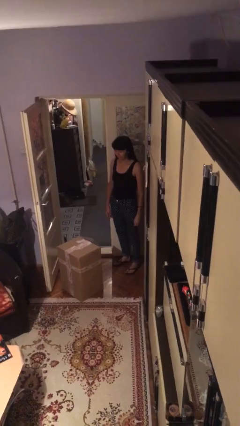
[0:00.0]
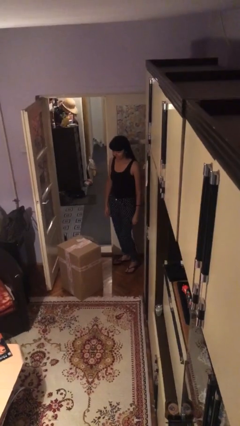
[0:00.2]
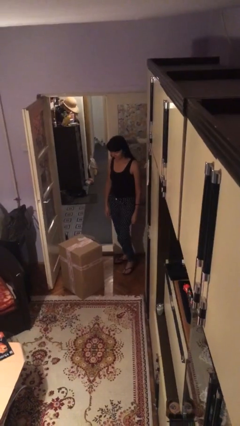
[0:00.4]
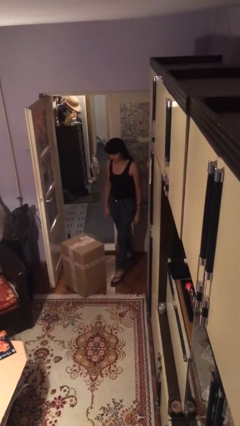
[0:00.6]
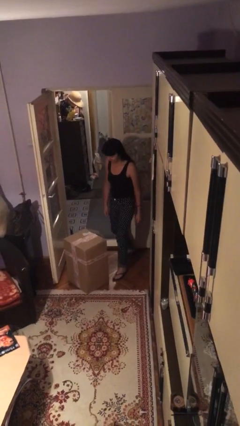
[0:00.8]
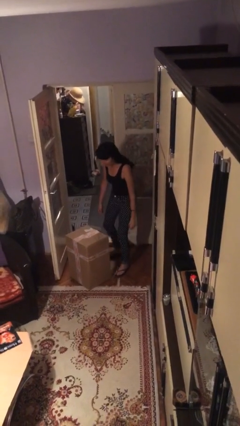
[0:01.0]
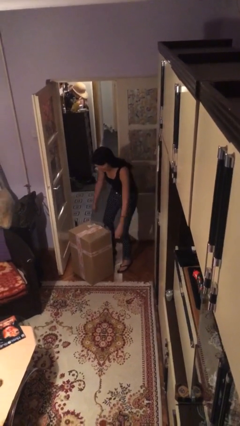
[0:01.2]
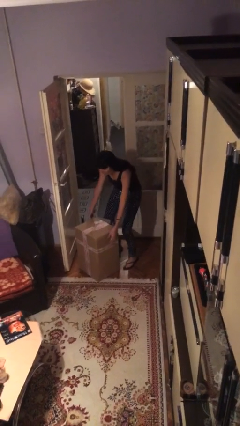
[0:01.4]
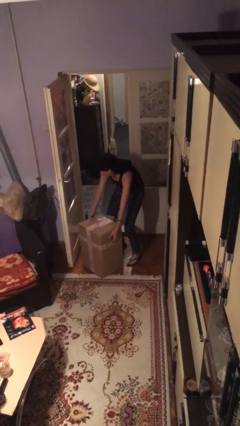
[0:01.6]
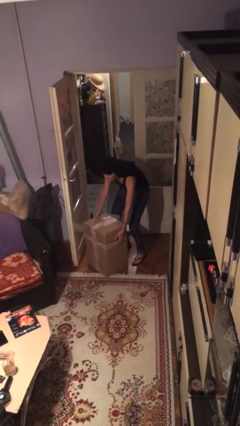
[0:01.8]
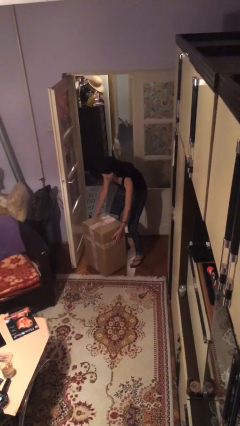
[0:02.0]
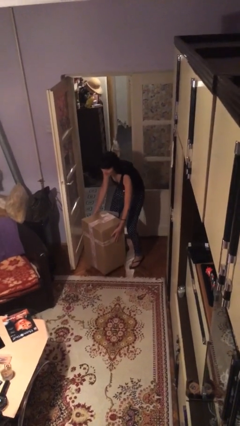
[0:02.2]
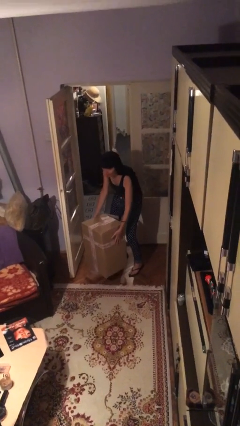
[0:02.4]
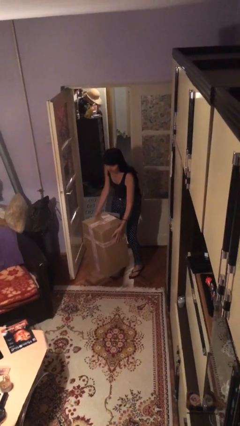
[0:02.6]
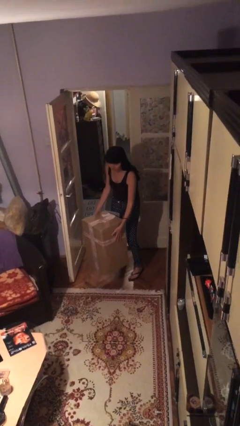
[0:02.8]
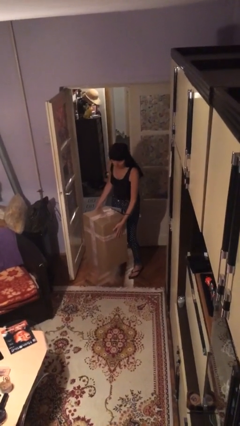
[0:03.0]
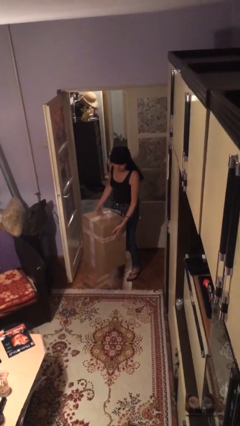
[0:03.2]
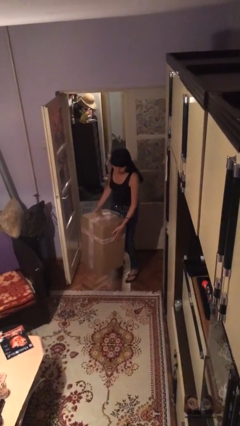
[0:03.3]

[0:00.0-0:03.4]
person picks up object from floor

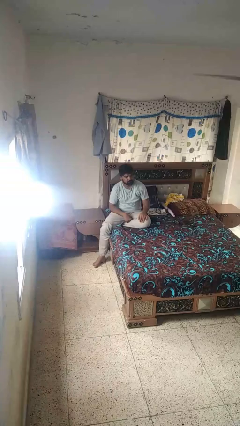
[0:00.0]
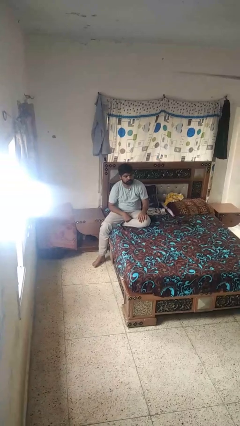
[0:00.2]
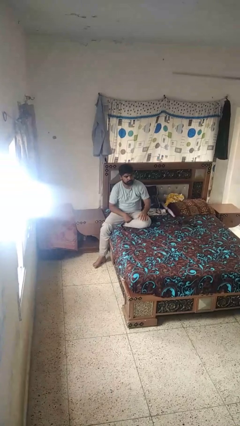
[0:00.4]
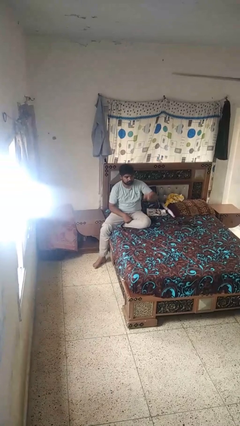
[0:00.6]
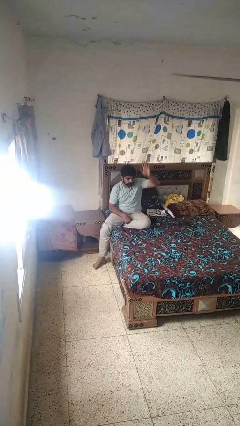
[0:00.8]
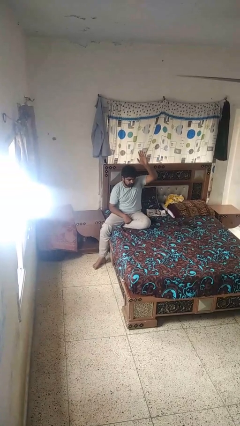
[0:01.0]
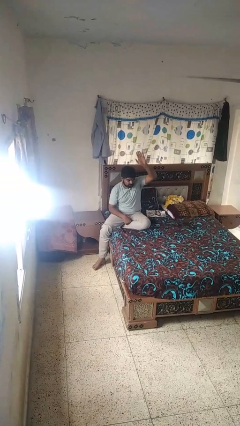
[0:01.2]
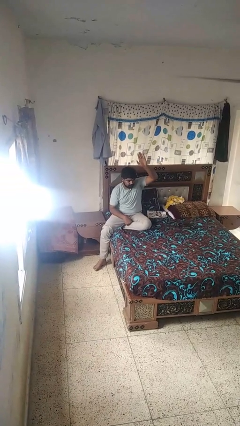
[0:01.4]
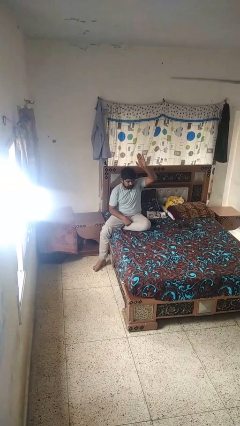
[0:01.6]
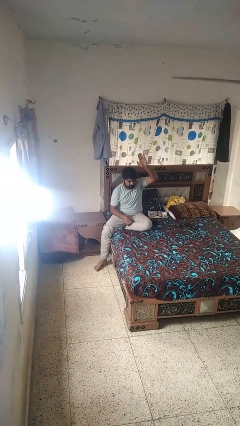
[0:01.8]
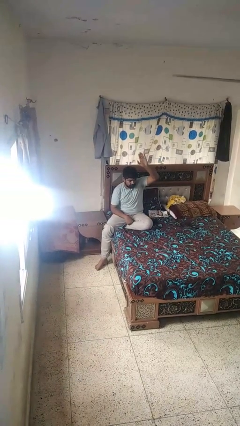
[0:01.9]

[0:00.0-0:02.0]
person gestures raise hand

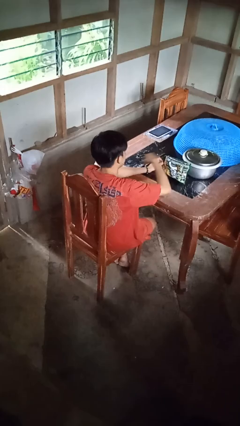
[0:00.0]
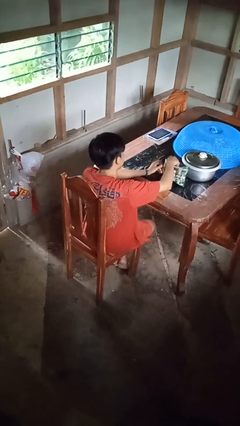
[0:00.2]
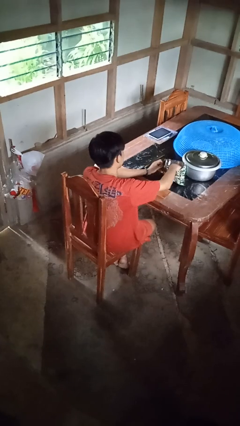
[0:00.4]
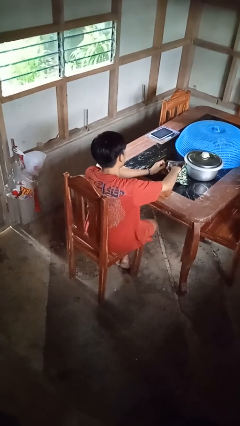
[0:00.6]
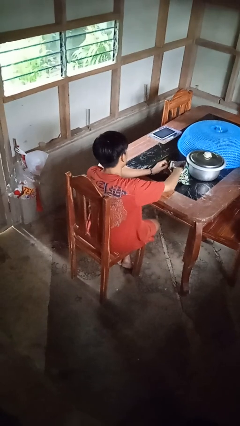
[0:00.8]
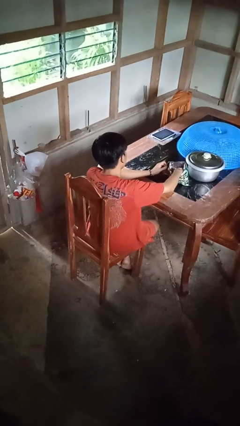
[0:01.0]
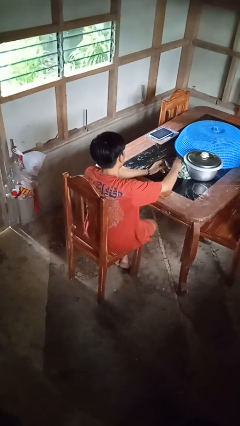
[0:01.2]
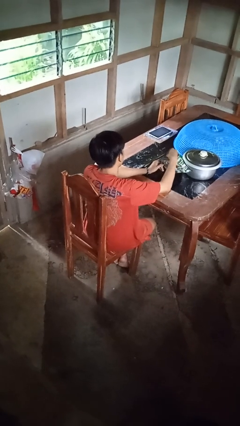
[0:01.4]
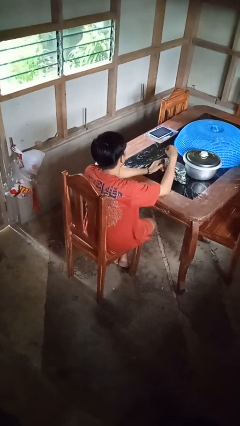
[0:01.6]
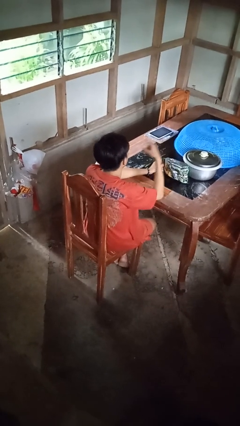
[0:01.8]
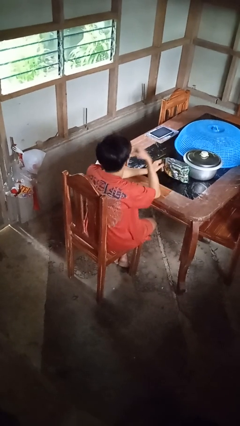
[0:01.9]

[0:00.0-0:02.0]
person eats snack from bag

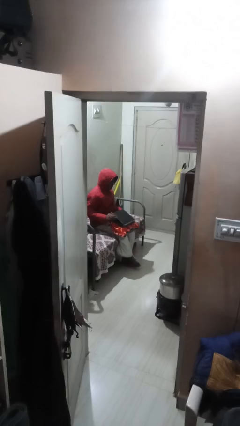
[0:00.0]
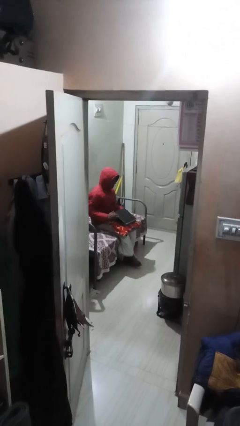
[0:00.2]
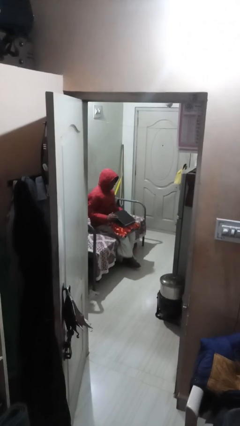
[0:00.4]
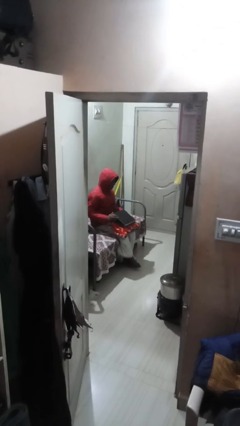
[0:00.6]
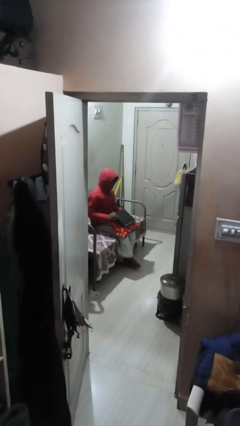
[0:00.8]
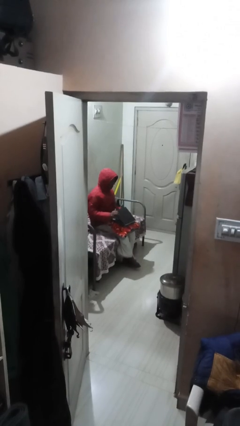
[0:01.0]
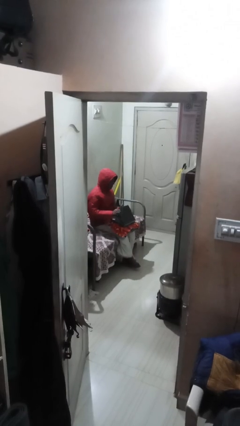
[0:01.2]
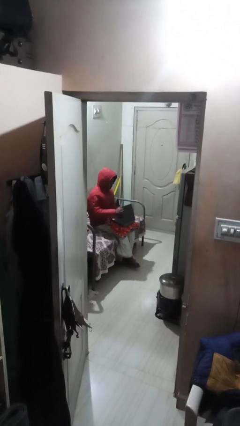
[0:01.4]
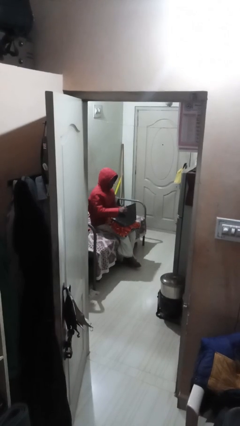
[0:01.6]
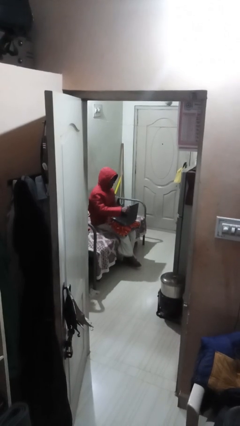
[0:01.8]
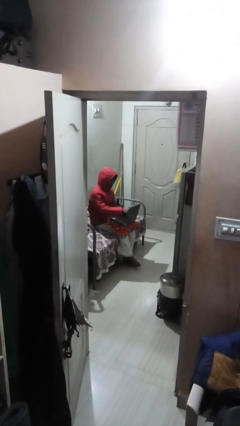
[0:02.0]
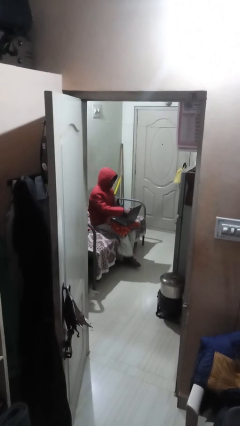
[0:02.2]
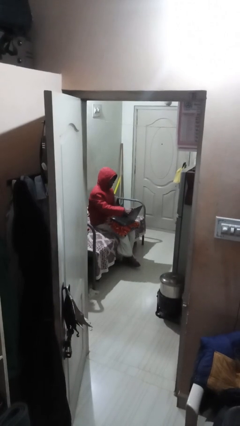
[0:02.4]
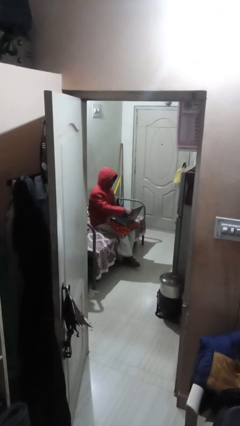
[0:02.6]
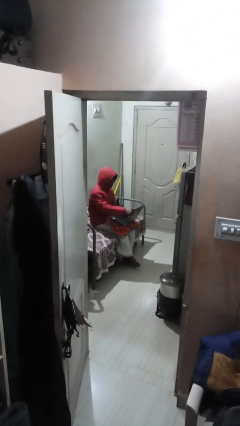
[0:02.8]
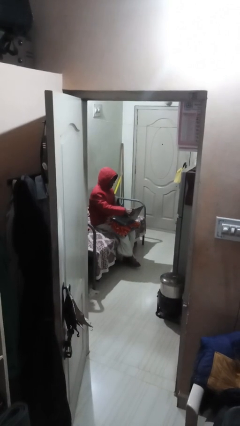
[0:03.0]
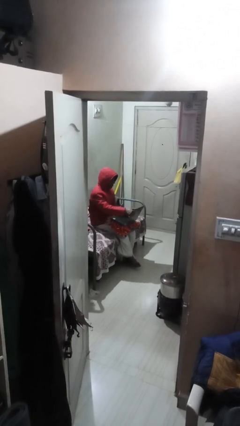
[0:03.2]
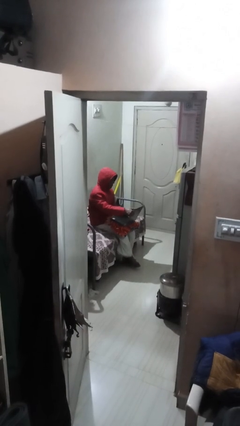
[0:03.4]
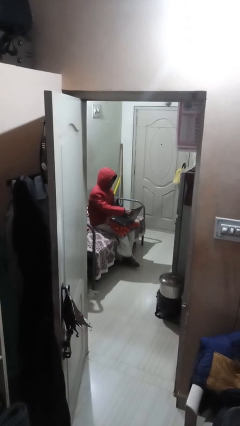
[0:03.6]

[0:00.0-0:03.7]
person interacts with laptop

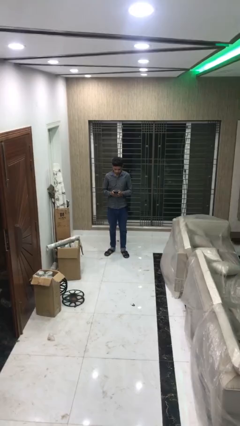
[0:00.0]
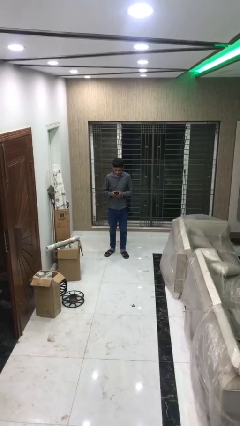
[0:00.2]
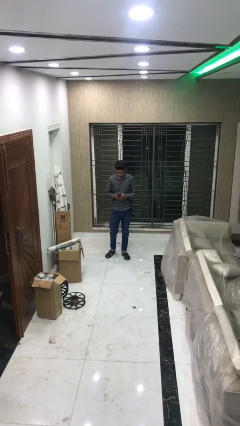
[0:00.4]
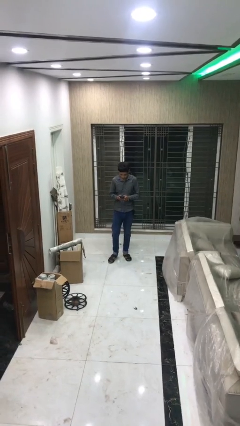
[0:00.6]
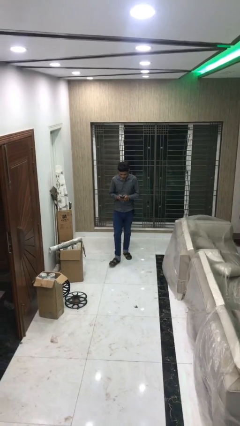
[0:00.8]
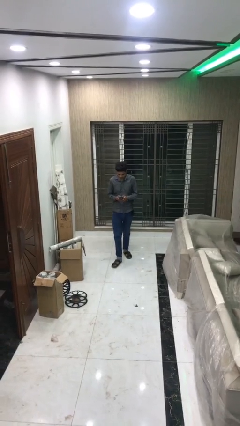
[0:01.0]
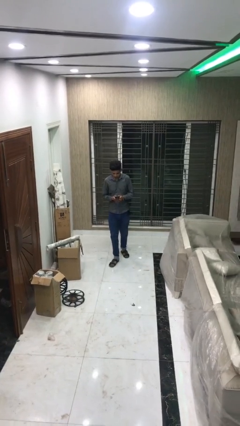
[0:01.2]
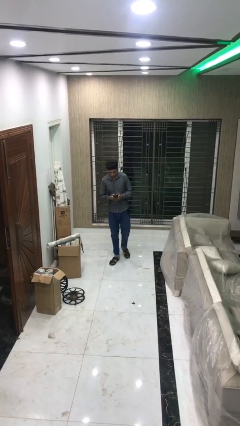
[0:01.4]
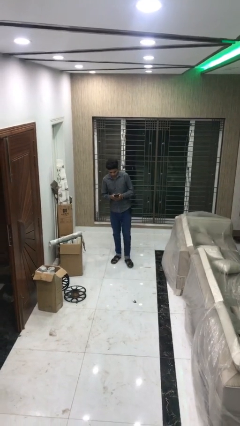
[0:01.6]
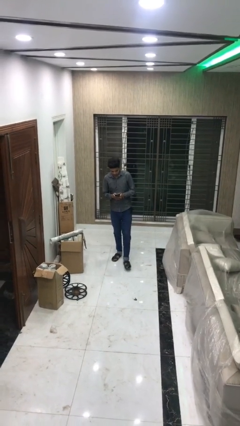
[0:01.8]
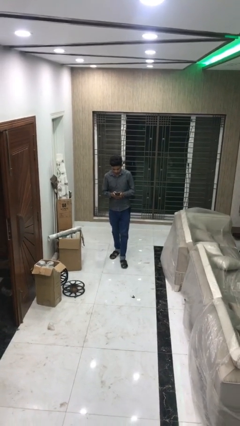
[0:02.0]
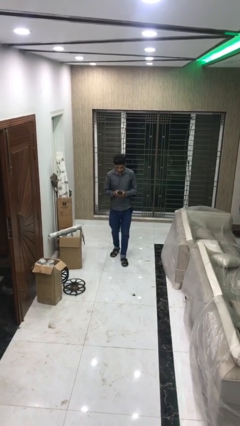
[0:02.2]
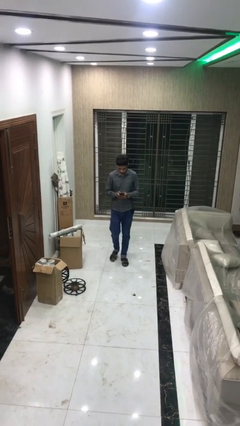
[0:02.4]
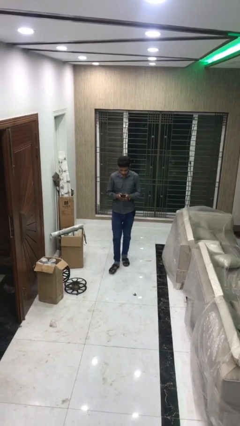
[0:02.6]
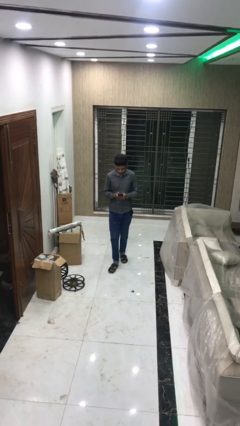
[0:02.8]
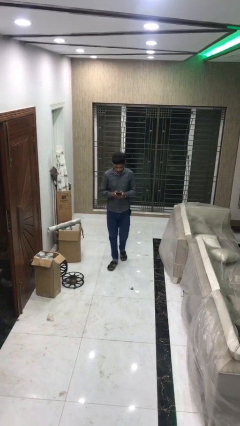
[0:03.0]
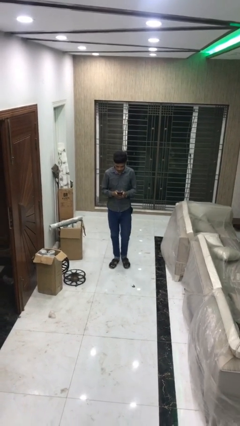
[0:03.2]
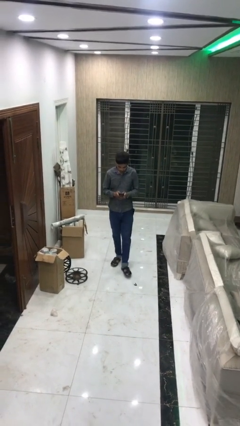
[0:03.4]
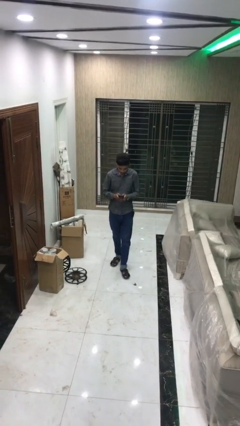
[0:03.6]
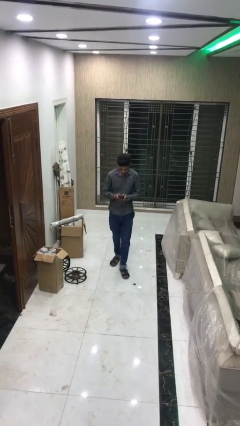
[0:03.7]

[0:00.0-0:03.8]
person texts on phone

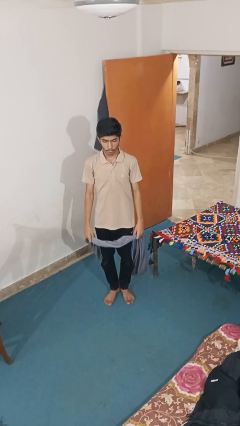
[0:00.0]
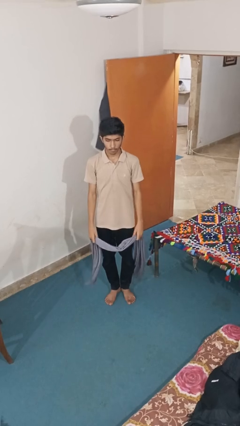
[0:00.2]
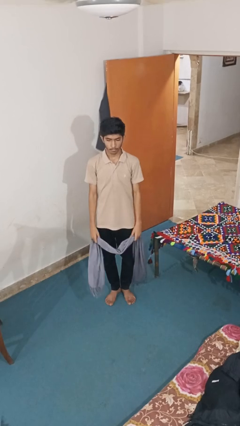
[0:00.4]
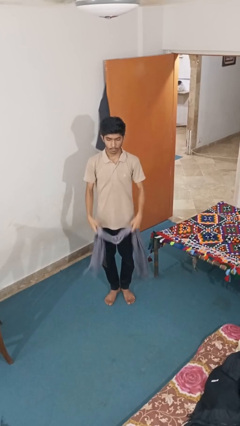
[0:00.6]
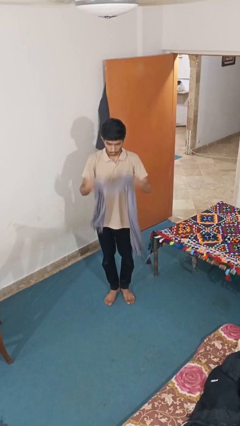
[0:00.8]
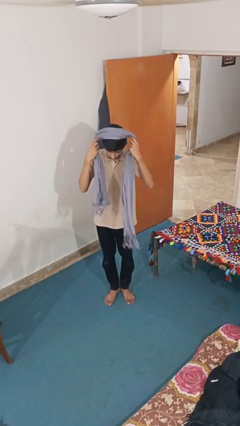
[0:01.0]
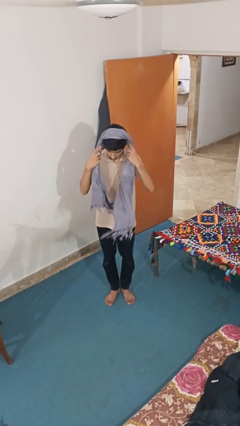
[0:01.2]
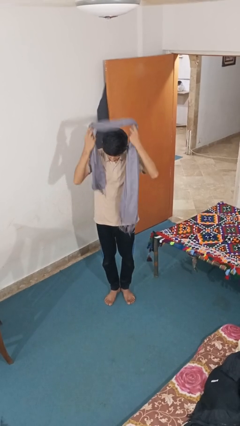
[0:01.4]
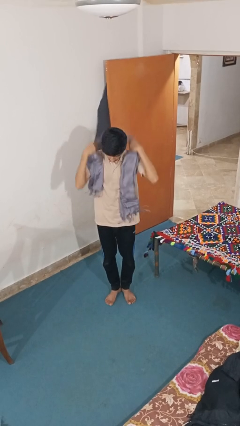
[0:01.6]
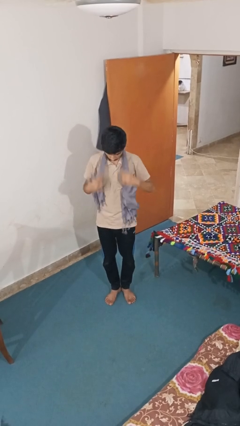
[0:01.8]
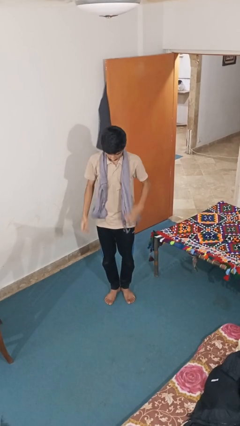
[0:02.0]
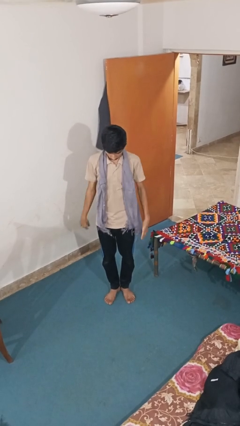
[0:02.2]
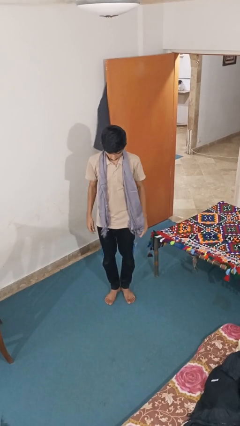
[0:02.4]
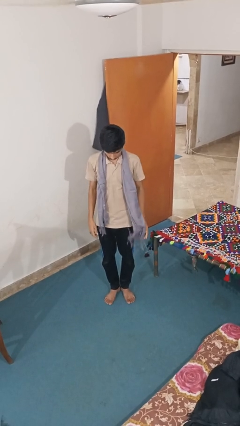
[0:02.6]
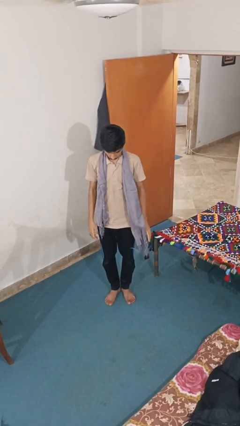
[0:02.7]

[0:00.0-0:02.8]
person puts on scarf
